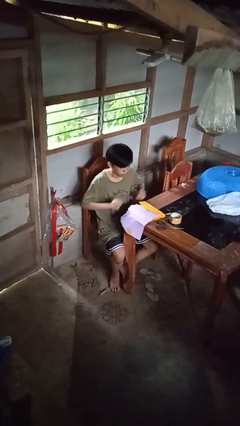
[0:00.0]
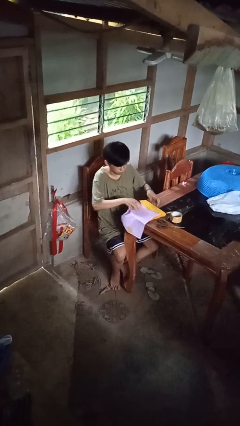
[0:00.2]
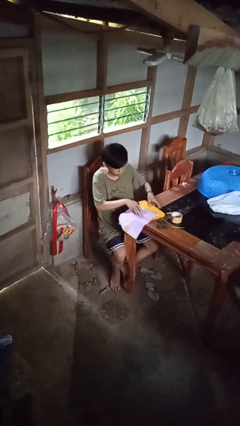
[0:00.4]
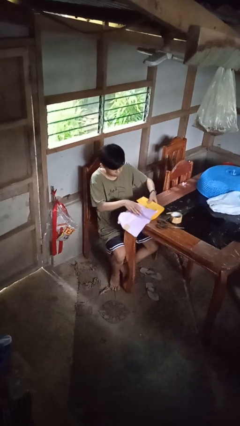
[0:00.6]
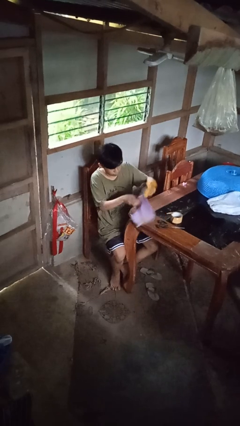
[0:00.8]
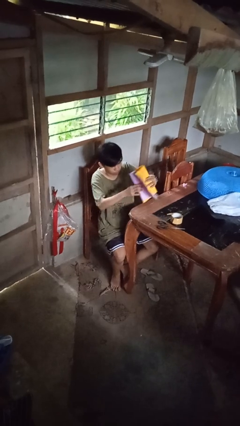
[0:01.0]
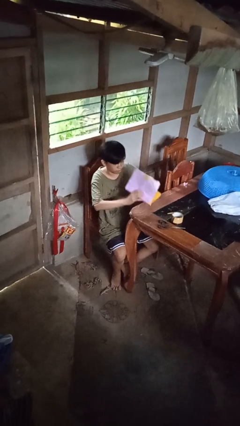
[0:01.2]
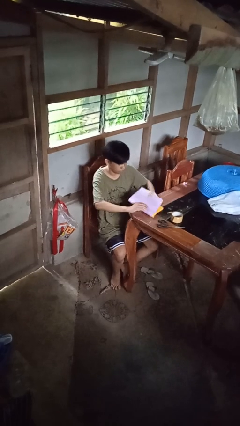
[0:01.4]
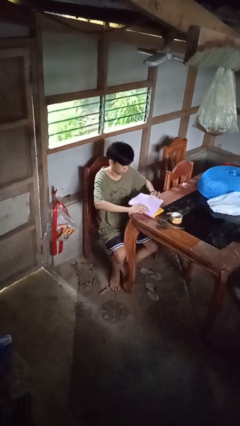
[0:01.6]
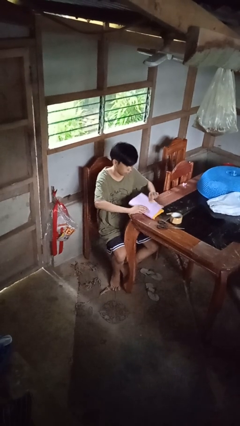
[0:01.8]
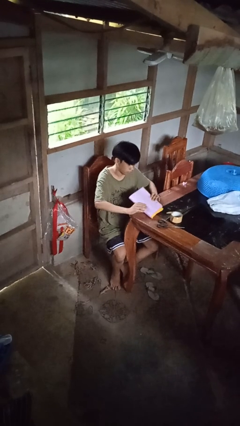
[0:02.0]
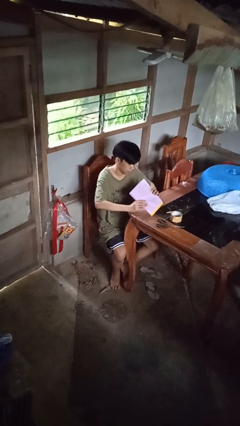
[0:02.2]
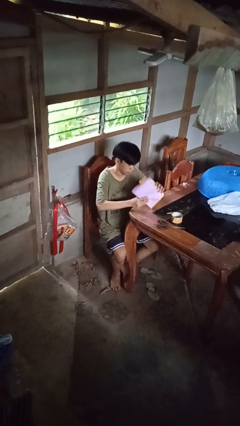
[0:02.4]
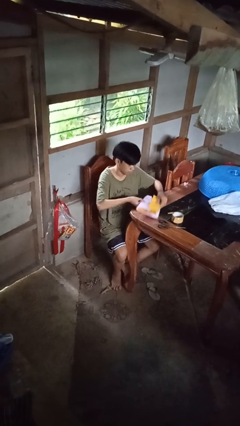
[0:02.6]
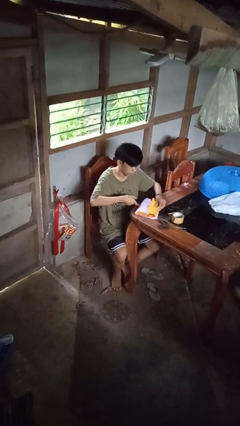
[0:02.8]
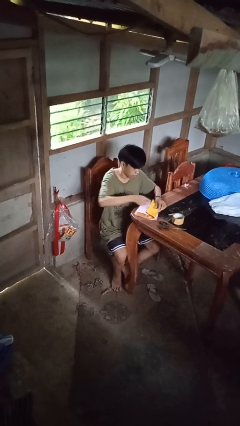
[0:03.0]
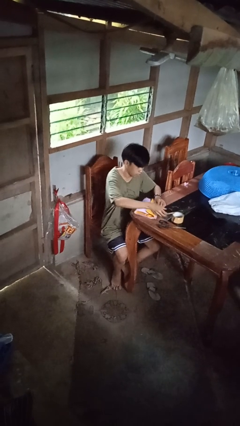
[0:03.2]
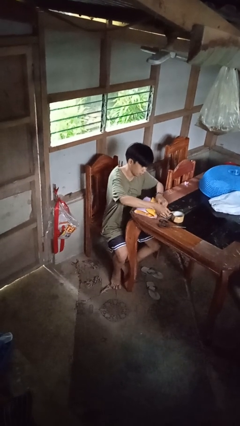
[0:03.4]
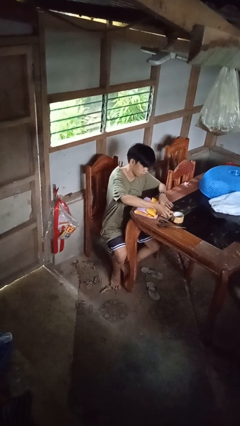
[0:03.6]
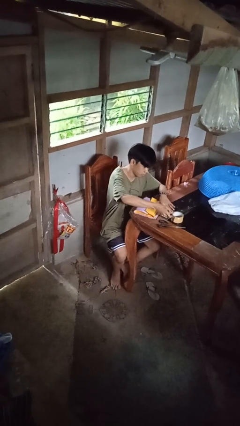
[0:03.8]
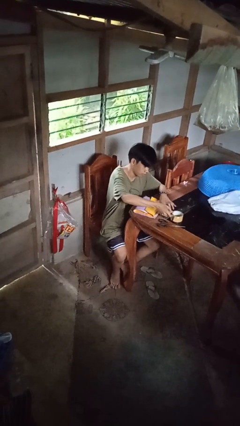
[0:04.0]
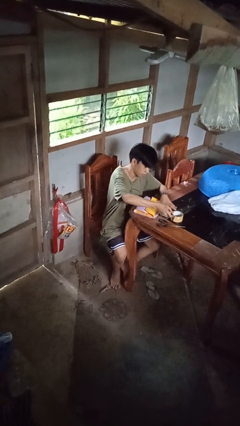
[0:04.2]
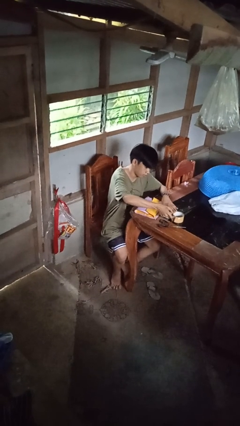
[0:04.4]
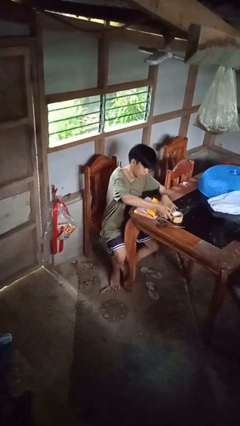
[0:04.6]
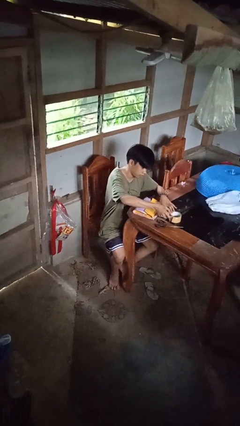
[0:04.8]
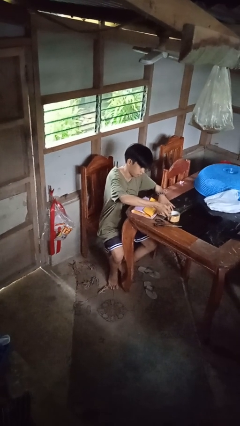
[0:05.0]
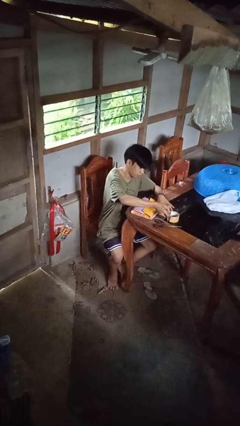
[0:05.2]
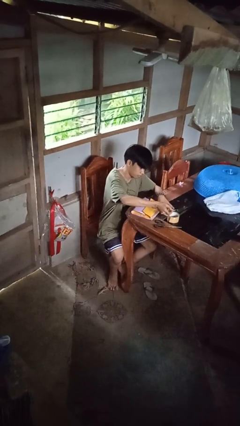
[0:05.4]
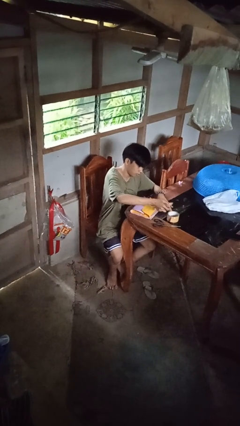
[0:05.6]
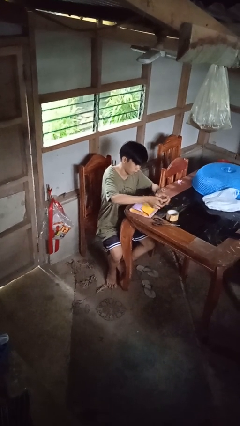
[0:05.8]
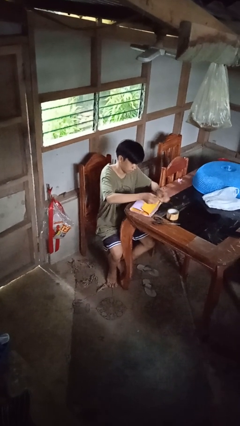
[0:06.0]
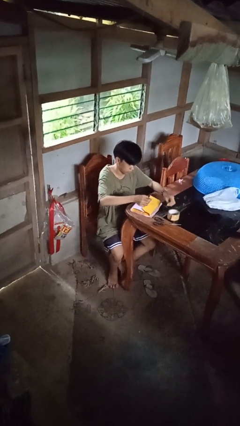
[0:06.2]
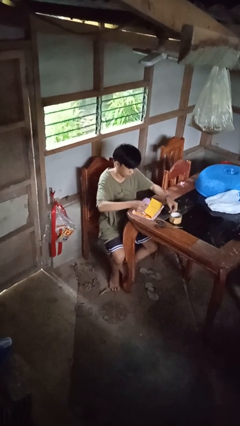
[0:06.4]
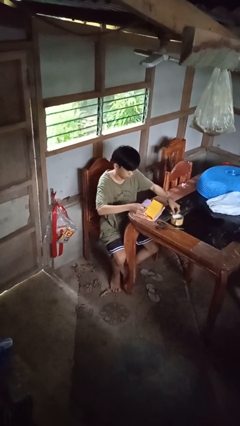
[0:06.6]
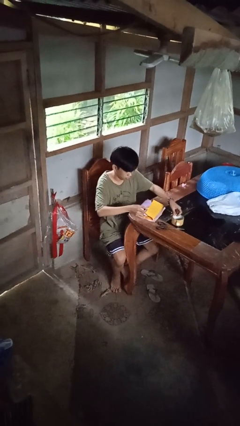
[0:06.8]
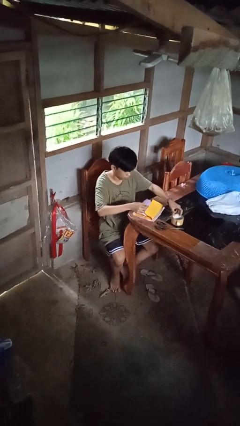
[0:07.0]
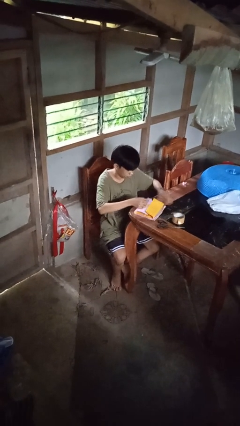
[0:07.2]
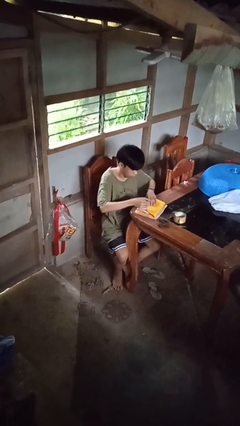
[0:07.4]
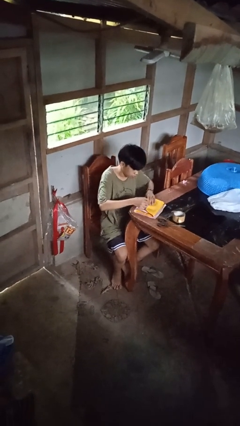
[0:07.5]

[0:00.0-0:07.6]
person wraps box

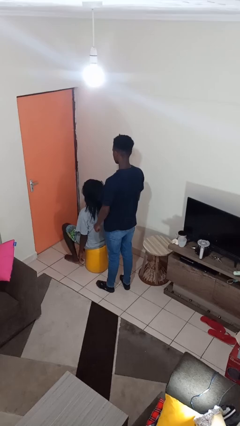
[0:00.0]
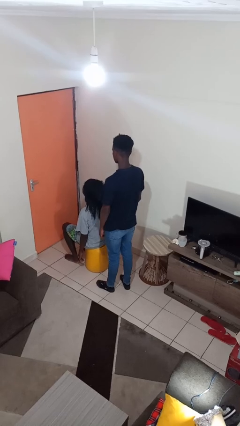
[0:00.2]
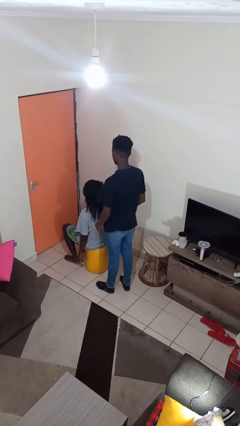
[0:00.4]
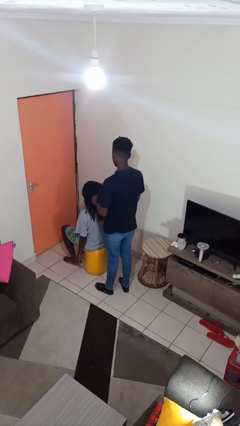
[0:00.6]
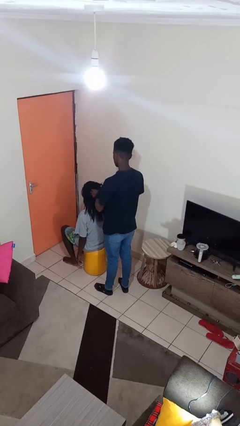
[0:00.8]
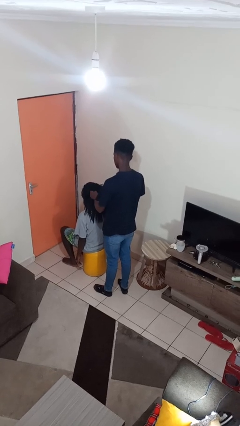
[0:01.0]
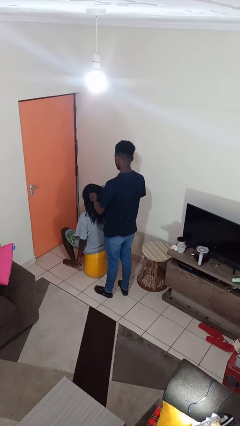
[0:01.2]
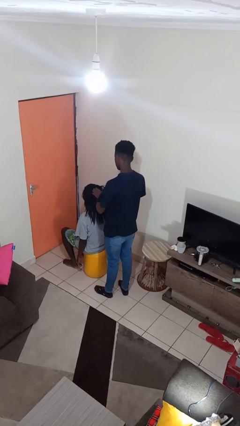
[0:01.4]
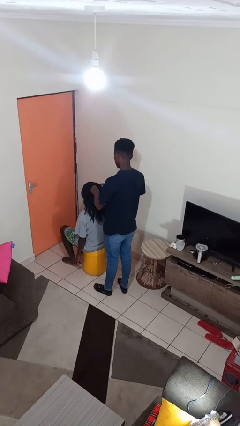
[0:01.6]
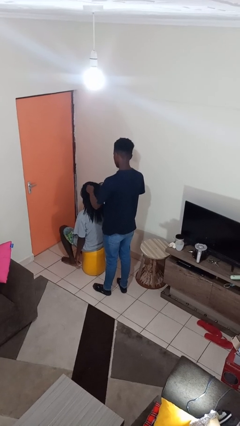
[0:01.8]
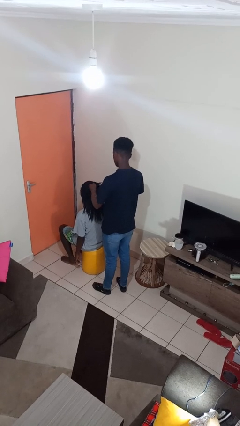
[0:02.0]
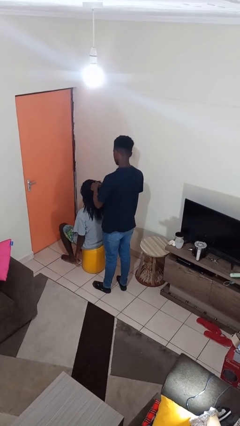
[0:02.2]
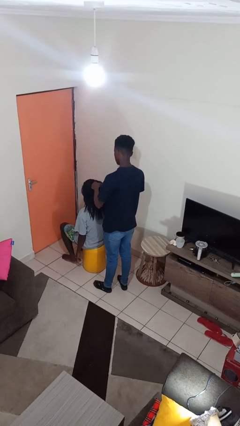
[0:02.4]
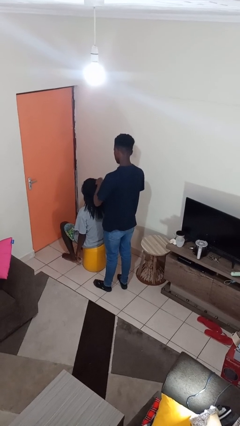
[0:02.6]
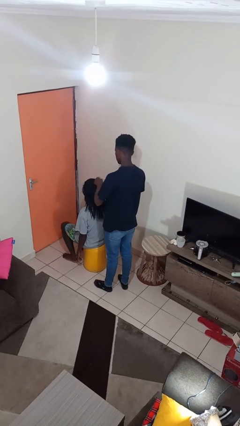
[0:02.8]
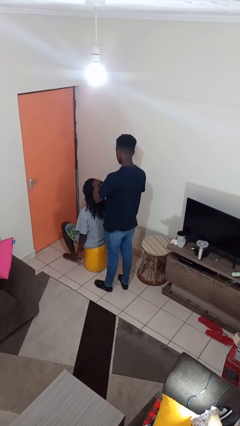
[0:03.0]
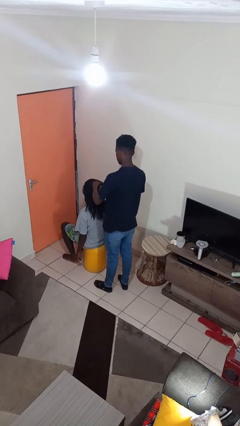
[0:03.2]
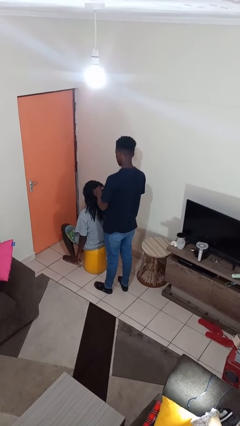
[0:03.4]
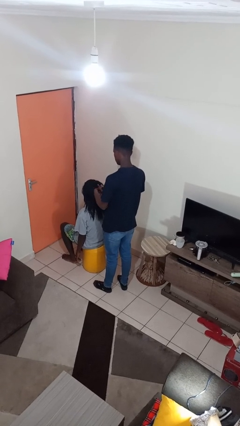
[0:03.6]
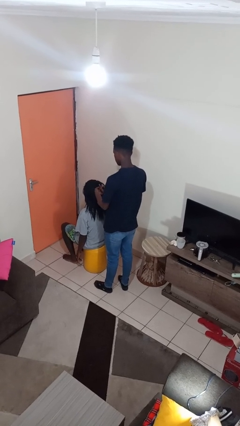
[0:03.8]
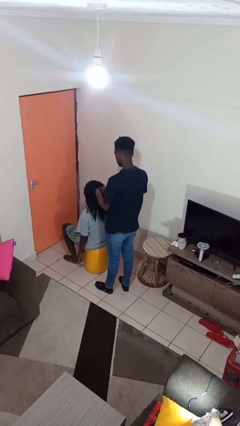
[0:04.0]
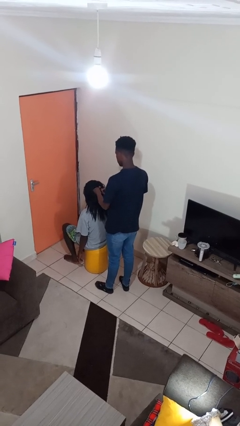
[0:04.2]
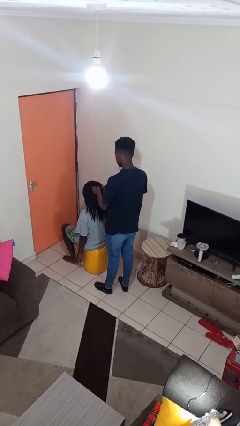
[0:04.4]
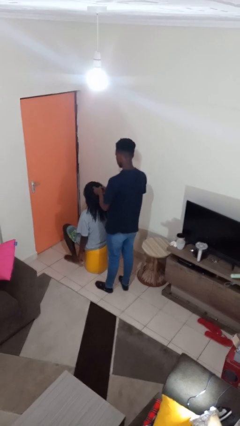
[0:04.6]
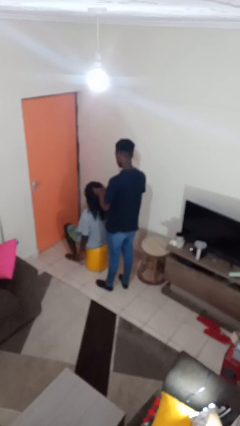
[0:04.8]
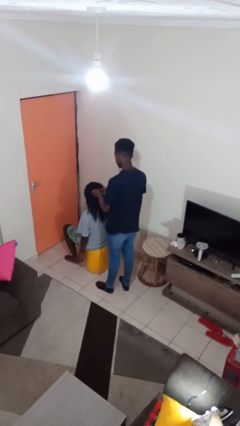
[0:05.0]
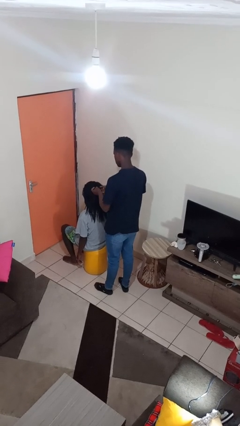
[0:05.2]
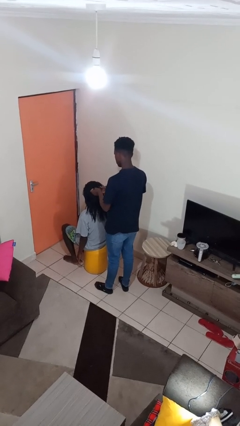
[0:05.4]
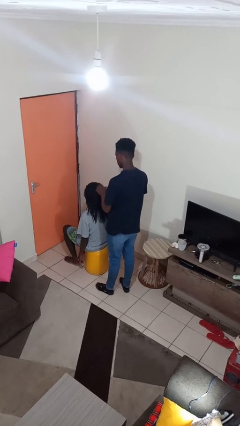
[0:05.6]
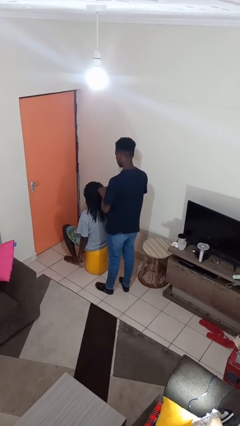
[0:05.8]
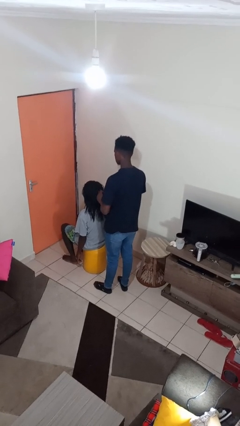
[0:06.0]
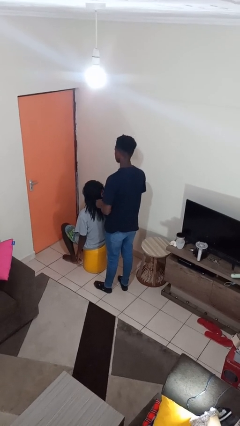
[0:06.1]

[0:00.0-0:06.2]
person braids hair of person

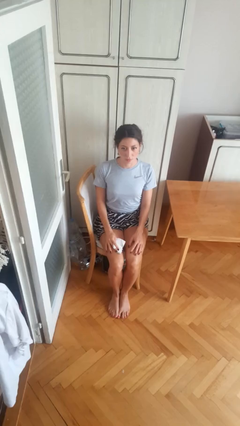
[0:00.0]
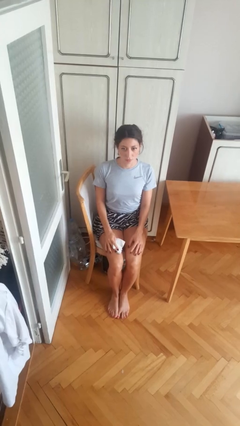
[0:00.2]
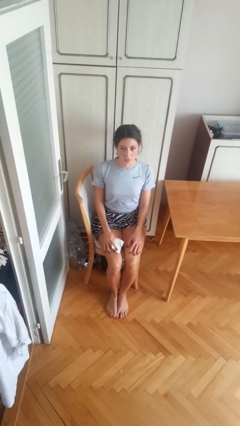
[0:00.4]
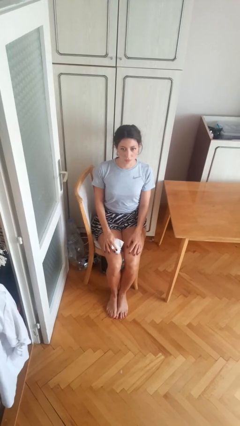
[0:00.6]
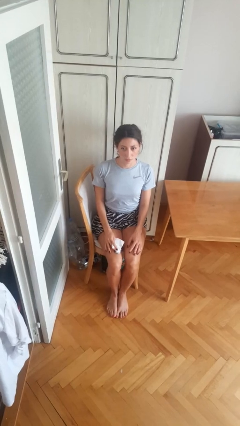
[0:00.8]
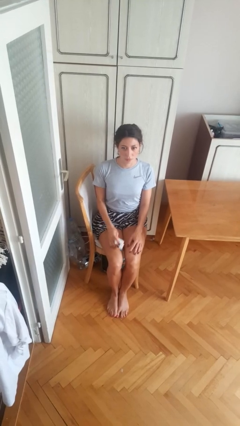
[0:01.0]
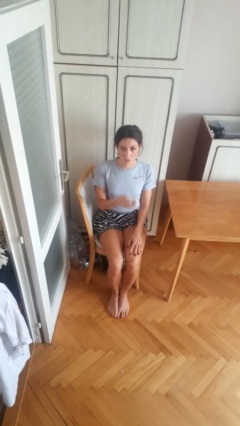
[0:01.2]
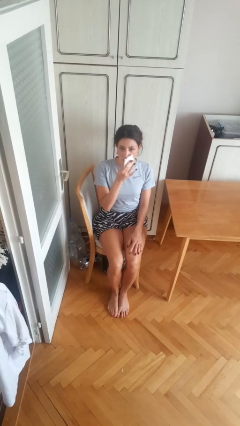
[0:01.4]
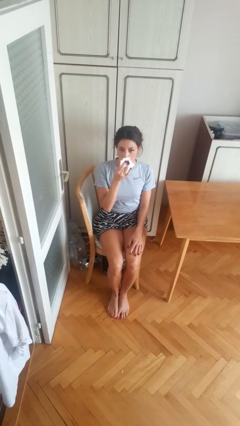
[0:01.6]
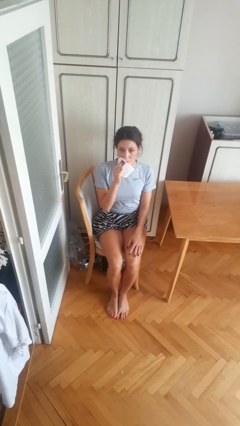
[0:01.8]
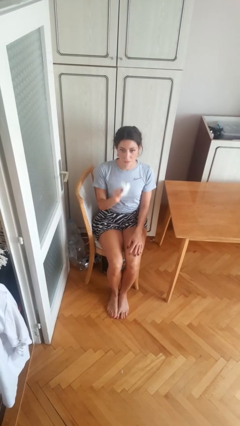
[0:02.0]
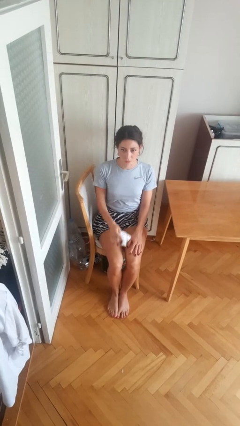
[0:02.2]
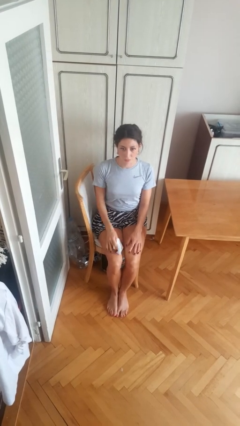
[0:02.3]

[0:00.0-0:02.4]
person wipes mouth with napkin

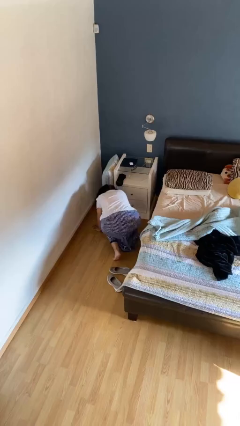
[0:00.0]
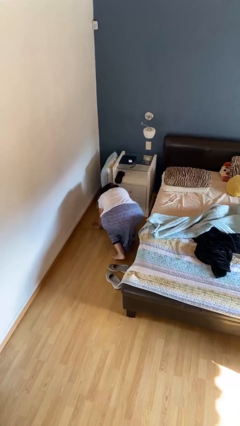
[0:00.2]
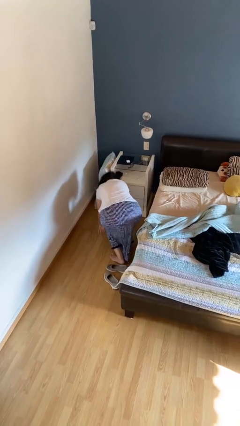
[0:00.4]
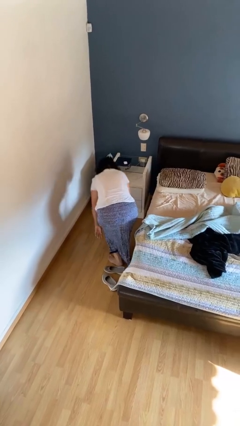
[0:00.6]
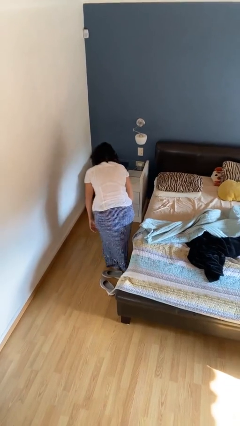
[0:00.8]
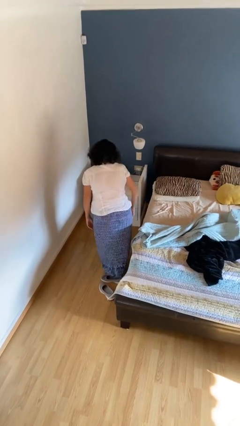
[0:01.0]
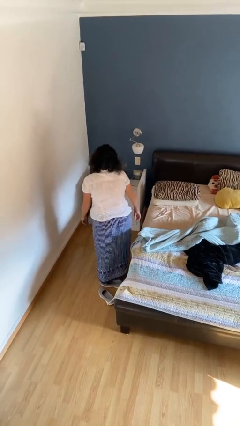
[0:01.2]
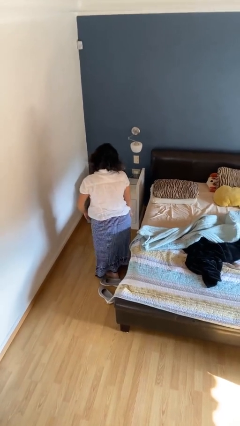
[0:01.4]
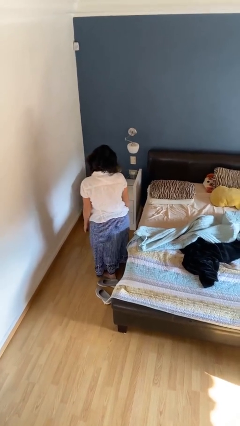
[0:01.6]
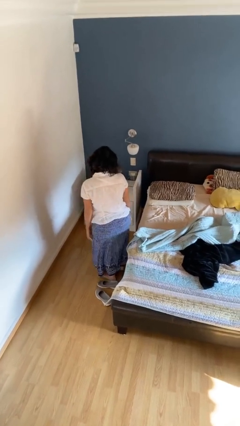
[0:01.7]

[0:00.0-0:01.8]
person stands up from floor
